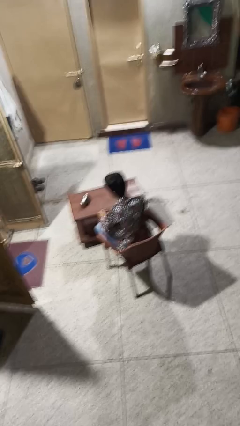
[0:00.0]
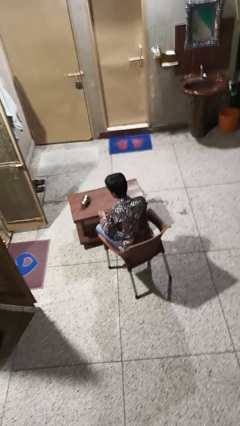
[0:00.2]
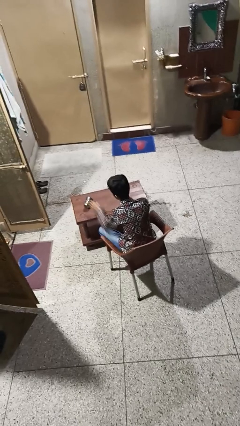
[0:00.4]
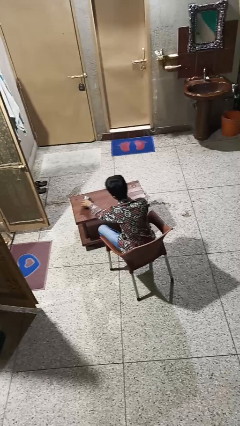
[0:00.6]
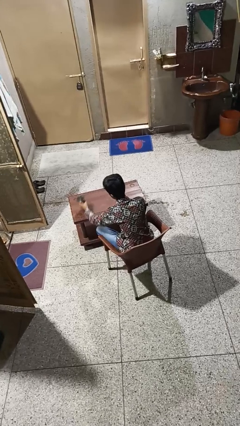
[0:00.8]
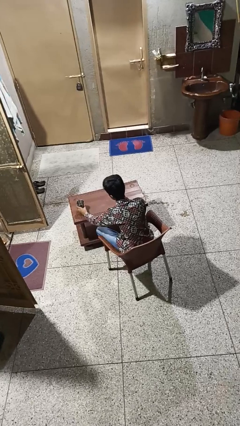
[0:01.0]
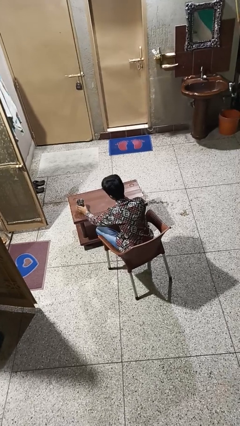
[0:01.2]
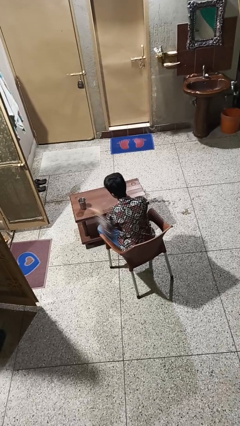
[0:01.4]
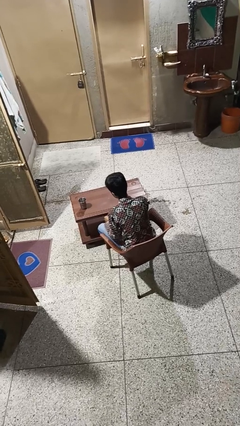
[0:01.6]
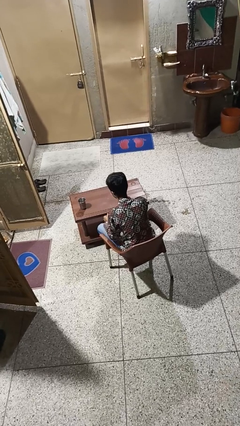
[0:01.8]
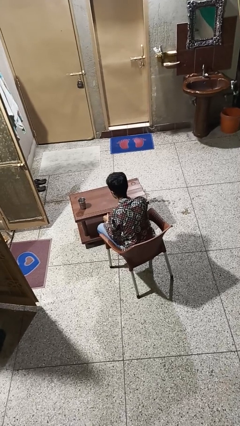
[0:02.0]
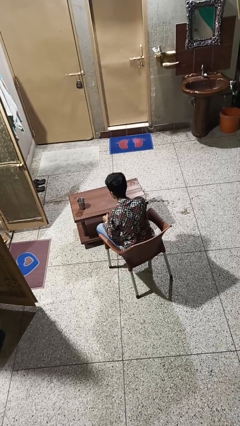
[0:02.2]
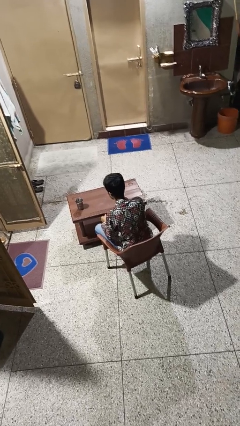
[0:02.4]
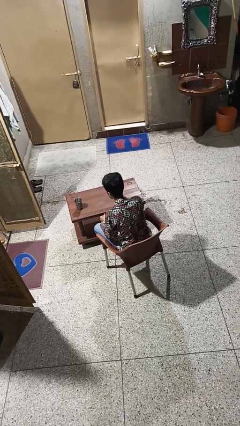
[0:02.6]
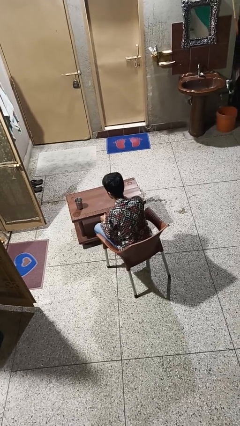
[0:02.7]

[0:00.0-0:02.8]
person sets upright glass

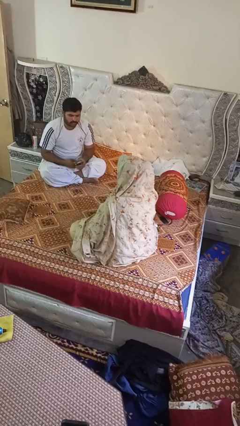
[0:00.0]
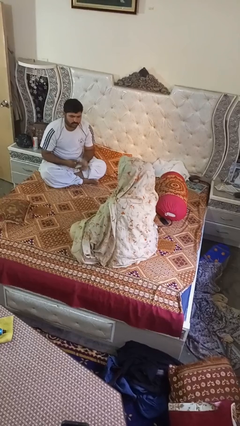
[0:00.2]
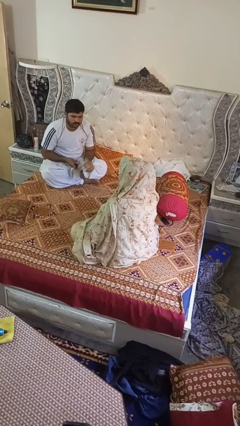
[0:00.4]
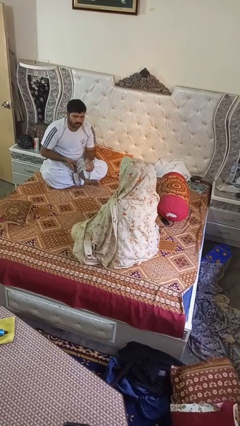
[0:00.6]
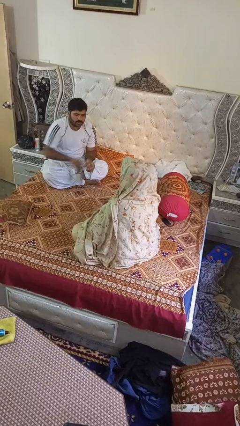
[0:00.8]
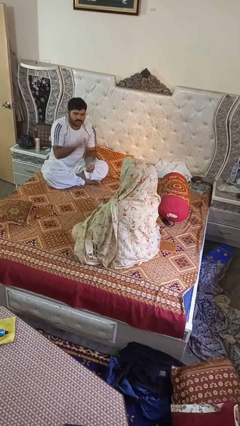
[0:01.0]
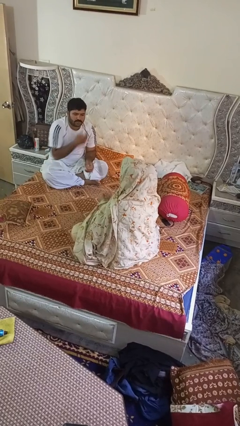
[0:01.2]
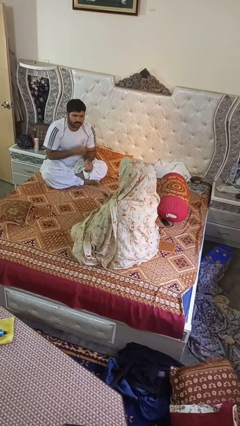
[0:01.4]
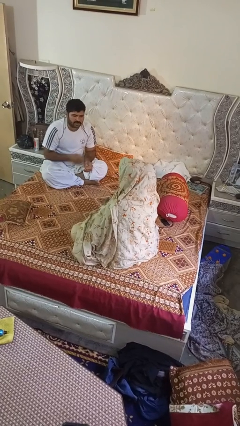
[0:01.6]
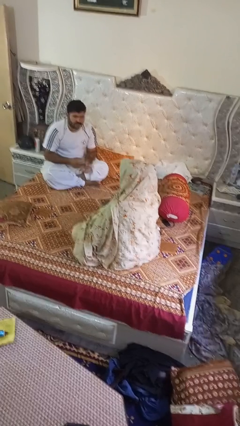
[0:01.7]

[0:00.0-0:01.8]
person catches object from person

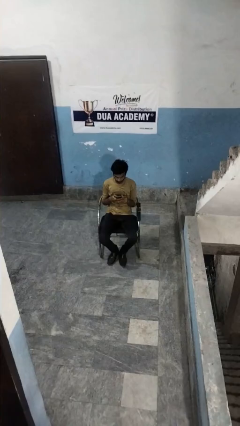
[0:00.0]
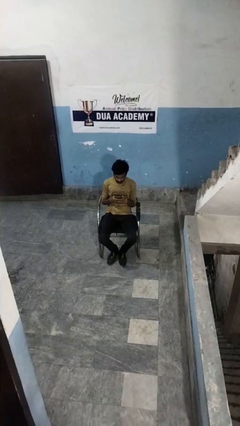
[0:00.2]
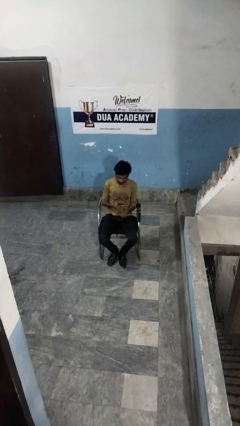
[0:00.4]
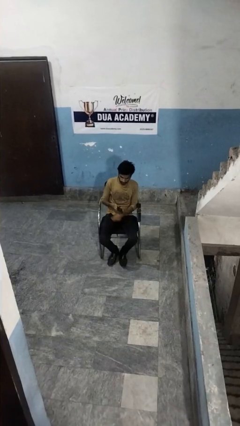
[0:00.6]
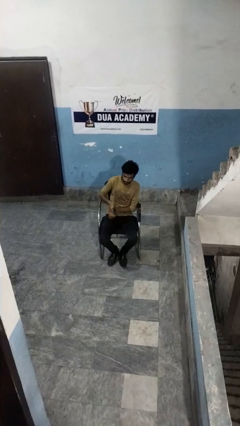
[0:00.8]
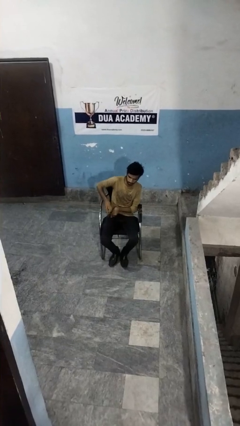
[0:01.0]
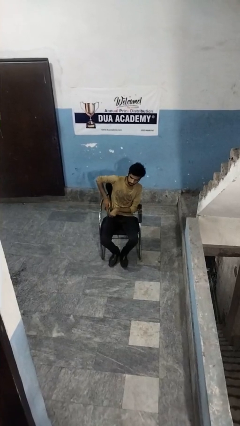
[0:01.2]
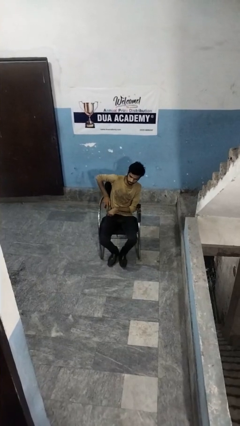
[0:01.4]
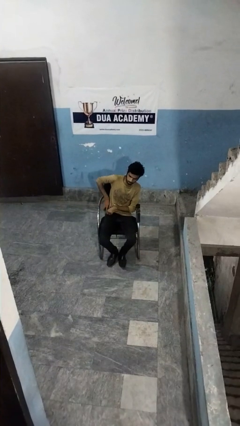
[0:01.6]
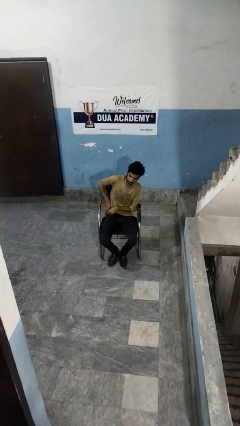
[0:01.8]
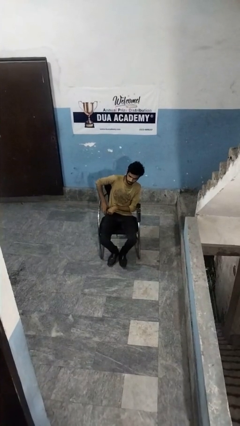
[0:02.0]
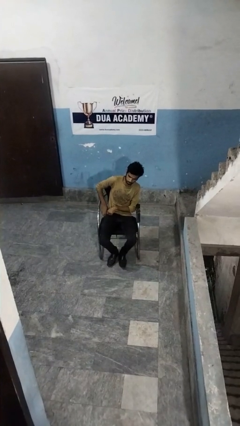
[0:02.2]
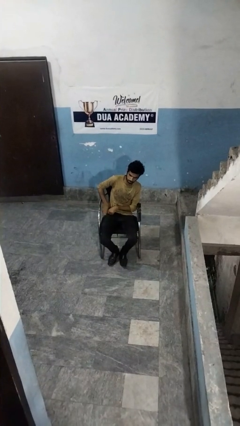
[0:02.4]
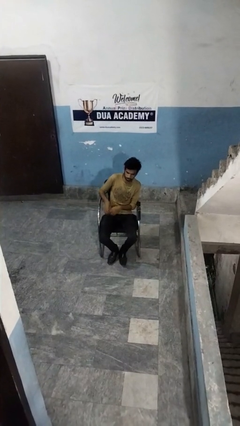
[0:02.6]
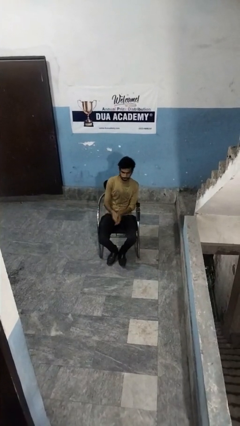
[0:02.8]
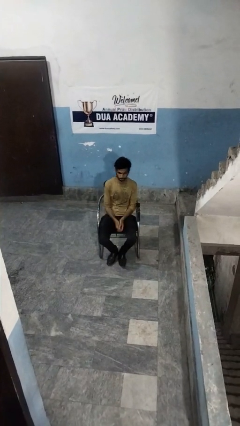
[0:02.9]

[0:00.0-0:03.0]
person puts phone into pocket

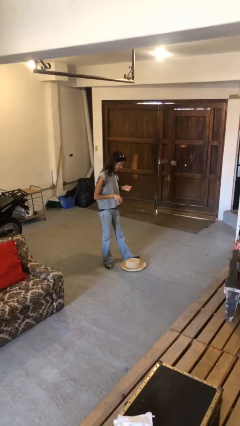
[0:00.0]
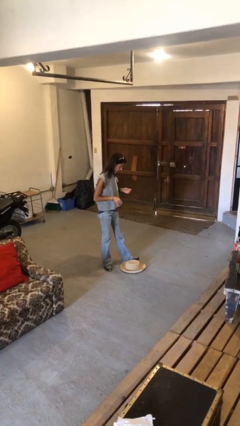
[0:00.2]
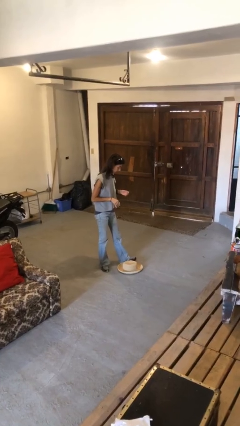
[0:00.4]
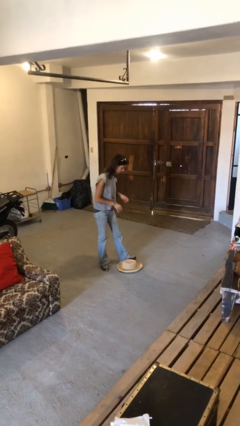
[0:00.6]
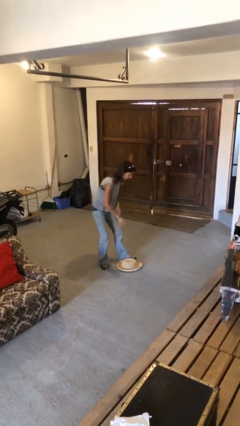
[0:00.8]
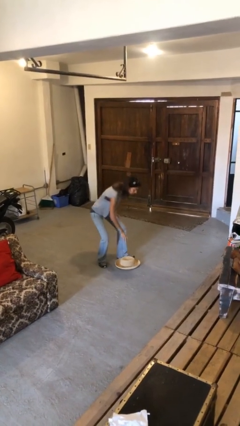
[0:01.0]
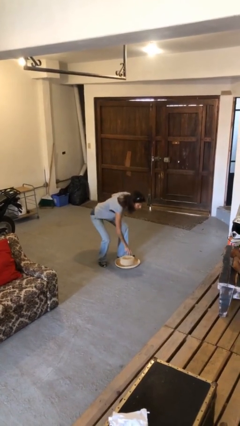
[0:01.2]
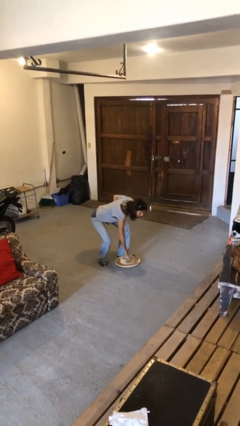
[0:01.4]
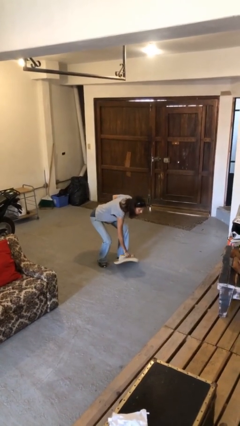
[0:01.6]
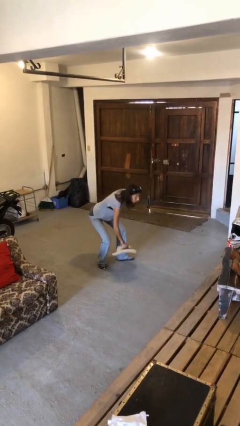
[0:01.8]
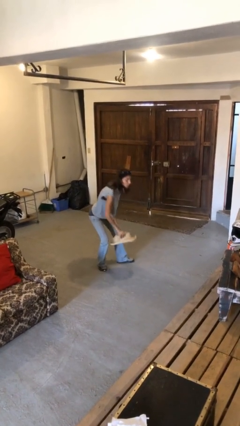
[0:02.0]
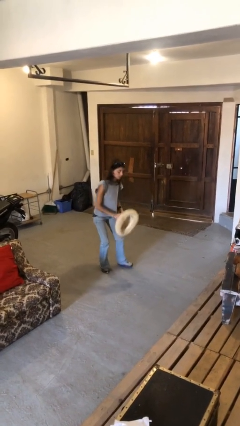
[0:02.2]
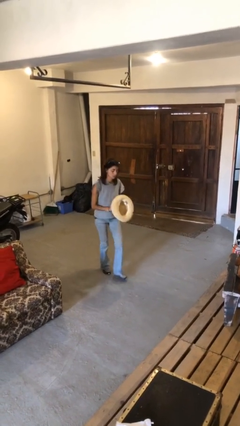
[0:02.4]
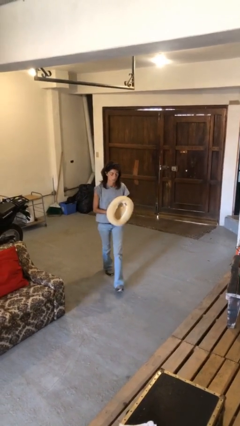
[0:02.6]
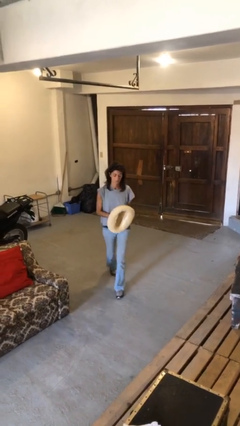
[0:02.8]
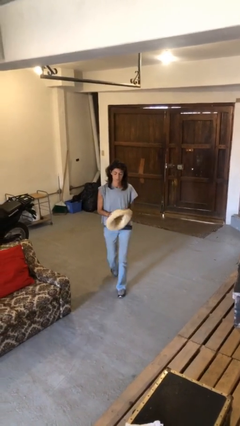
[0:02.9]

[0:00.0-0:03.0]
person picks up object from floor

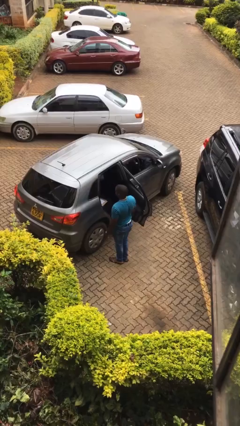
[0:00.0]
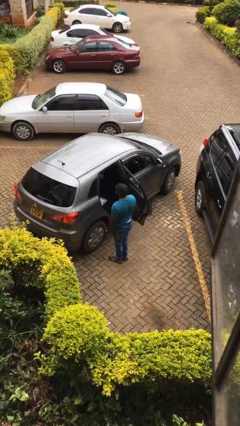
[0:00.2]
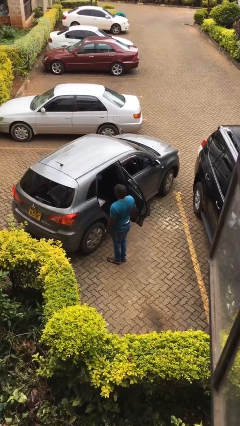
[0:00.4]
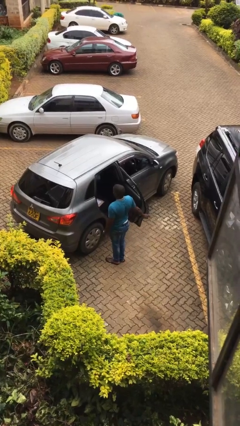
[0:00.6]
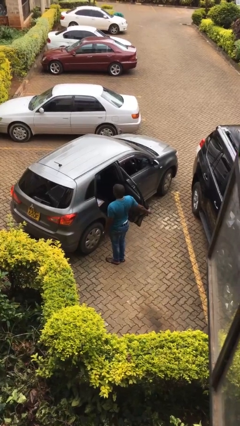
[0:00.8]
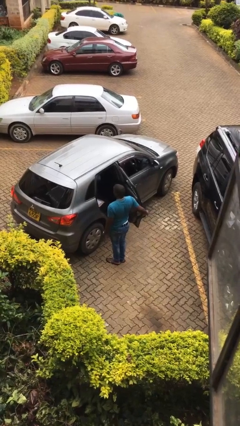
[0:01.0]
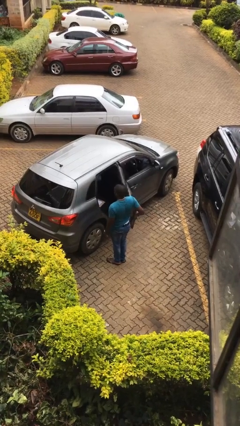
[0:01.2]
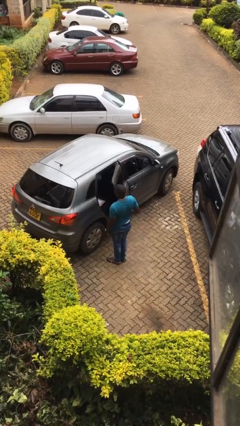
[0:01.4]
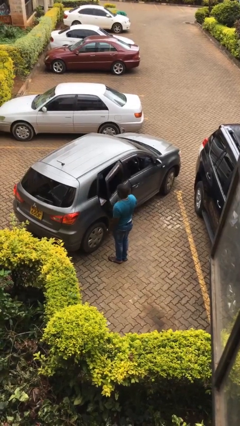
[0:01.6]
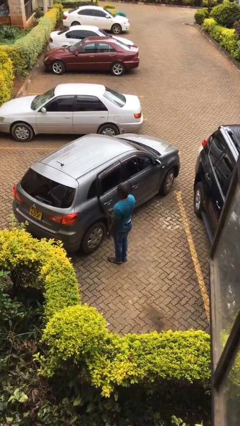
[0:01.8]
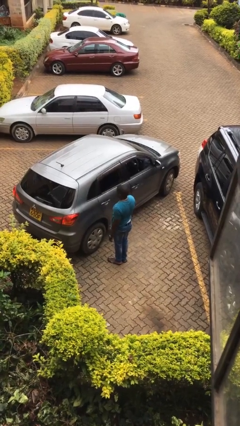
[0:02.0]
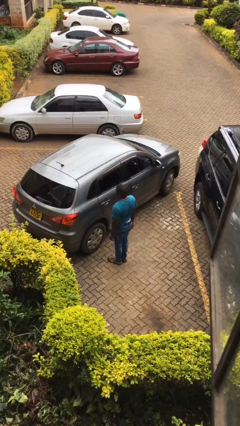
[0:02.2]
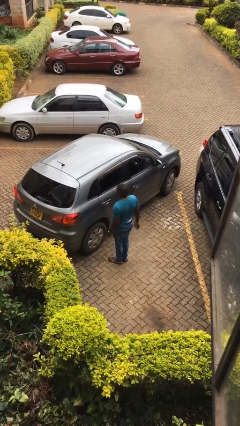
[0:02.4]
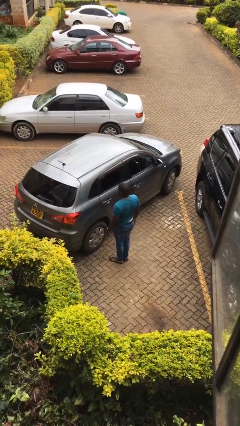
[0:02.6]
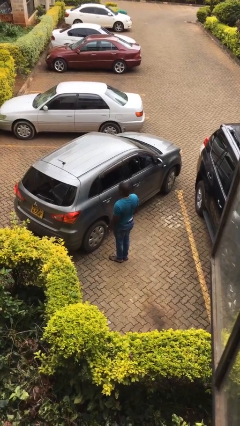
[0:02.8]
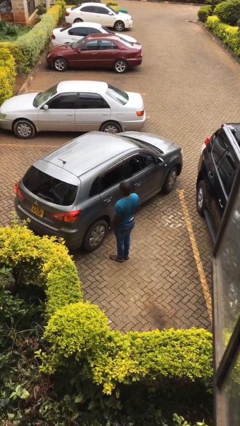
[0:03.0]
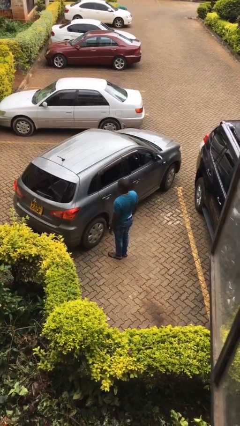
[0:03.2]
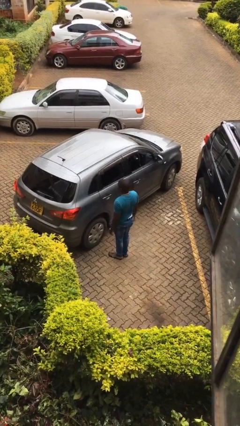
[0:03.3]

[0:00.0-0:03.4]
person closes car door

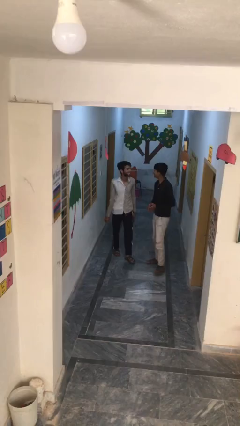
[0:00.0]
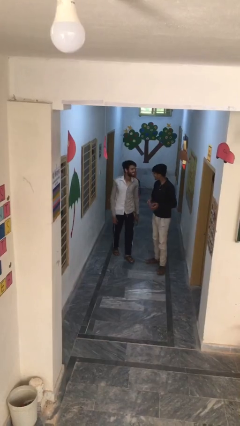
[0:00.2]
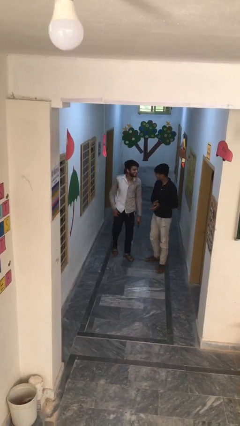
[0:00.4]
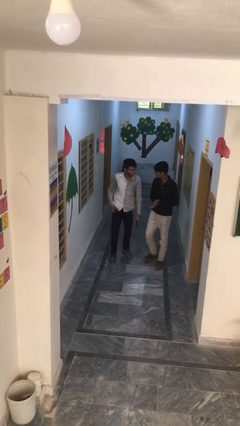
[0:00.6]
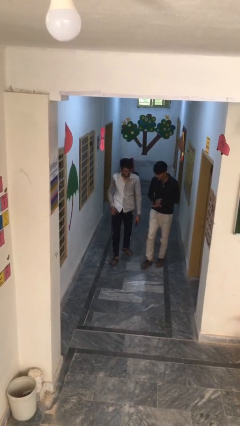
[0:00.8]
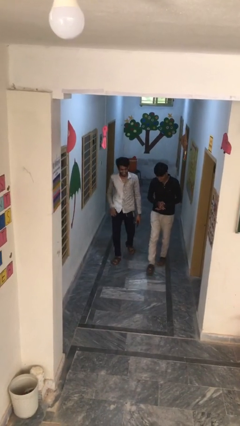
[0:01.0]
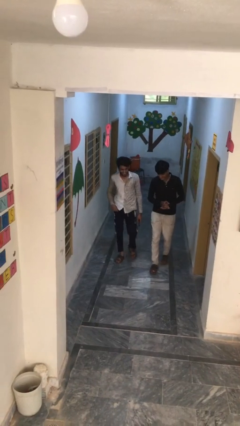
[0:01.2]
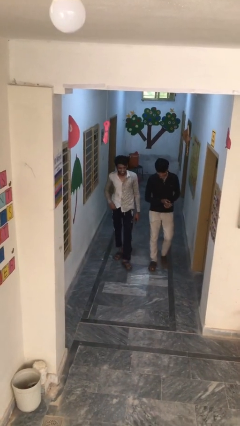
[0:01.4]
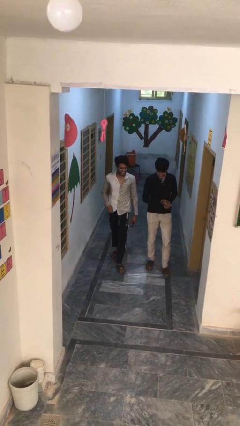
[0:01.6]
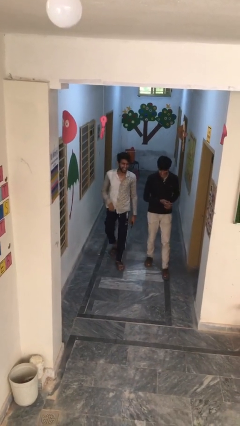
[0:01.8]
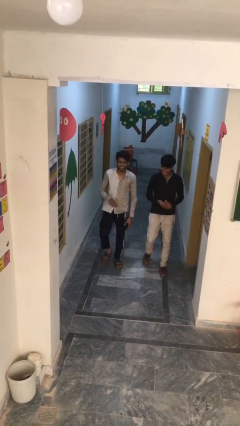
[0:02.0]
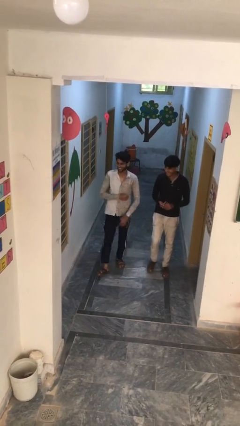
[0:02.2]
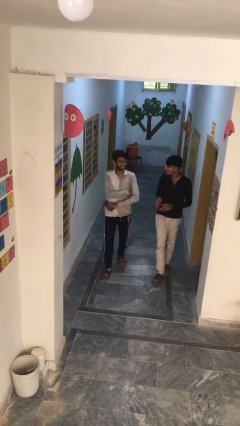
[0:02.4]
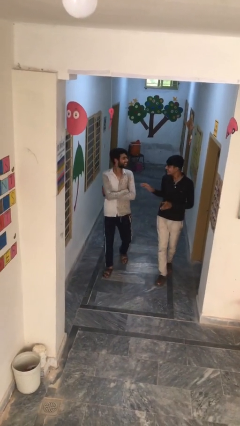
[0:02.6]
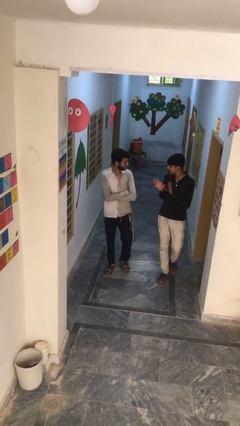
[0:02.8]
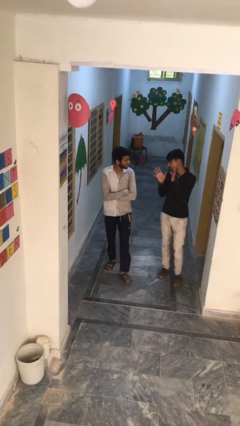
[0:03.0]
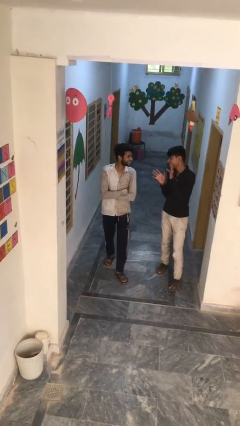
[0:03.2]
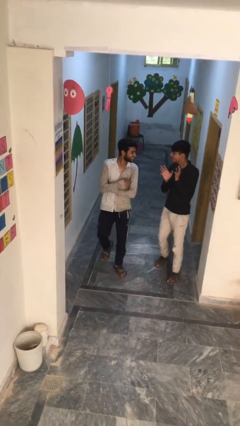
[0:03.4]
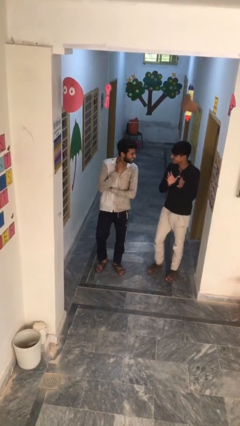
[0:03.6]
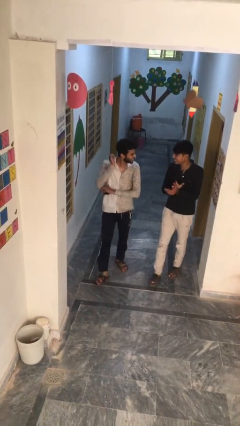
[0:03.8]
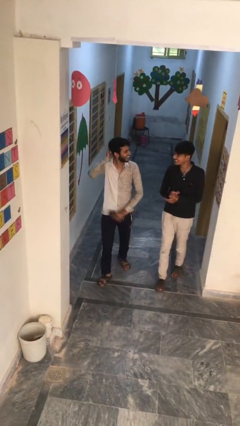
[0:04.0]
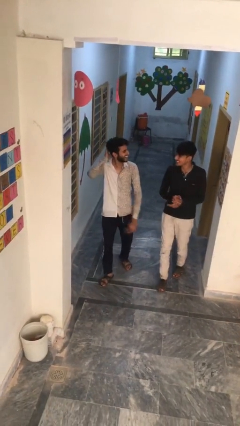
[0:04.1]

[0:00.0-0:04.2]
person talks to person
